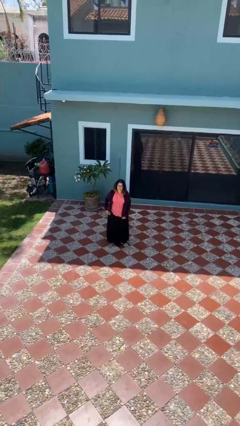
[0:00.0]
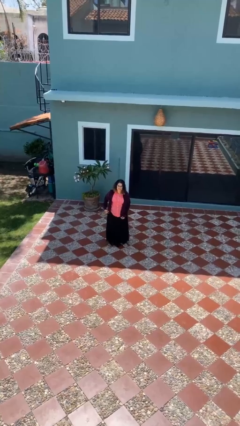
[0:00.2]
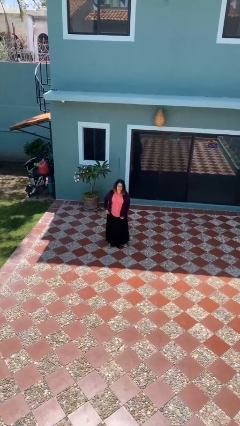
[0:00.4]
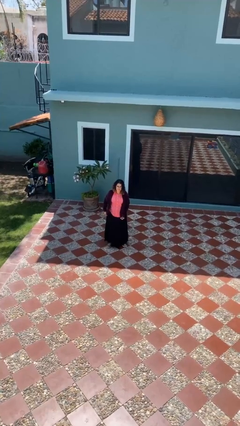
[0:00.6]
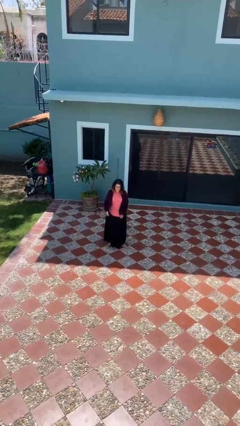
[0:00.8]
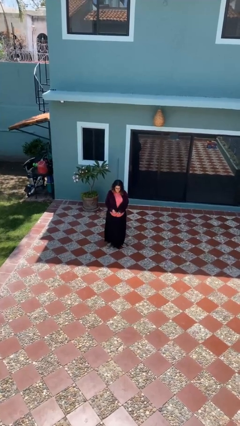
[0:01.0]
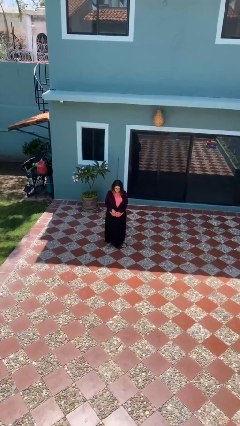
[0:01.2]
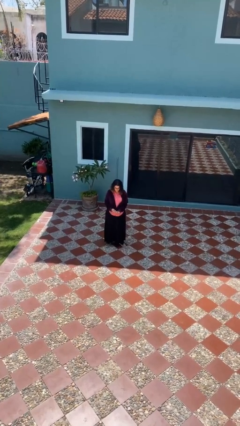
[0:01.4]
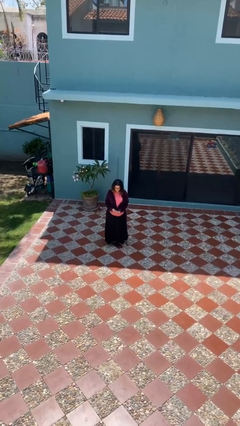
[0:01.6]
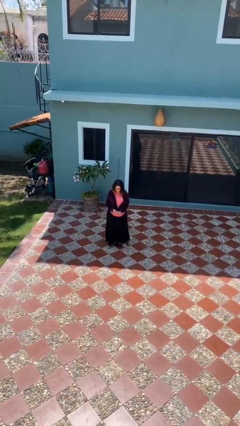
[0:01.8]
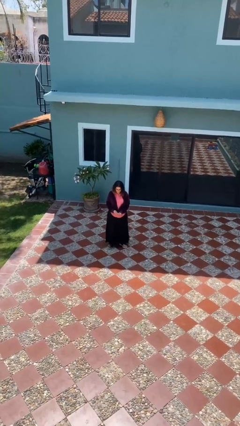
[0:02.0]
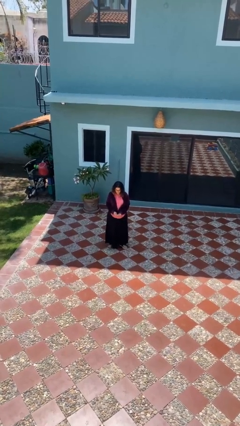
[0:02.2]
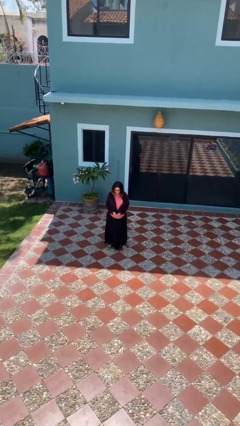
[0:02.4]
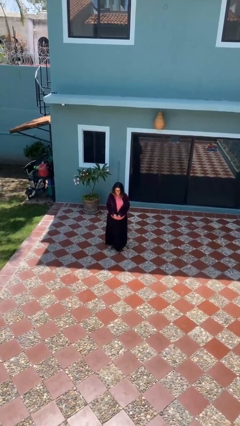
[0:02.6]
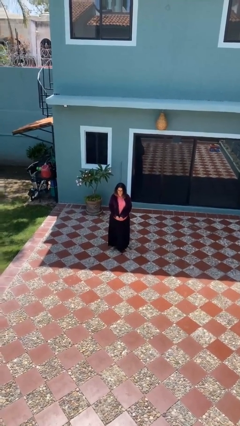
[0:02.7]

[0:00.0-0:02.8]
person zips up jacket

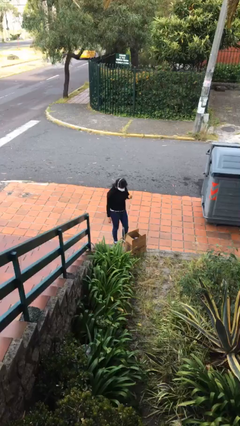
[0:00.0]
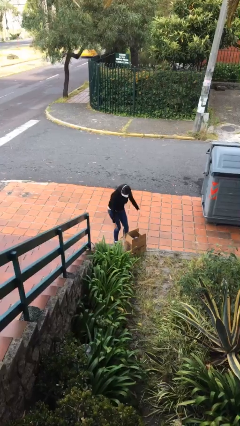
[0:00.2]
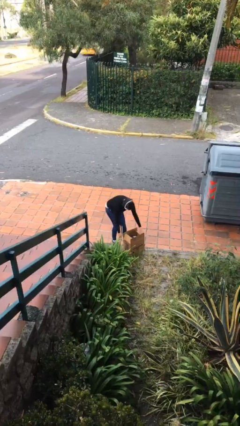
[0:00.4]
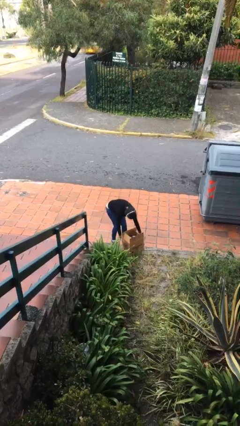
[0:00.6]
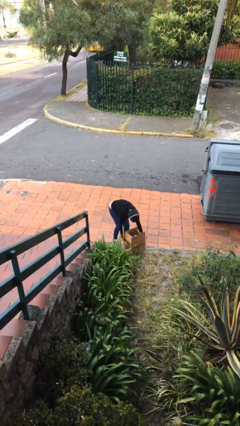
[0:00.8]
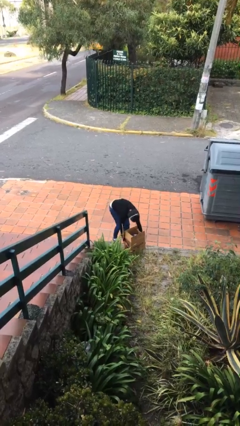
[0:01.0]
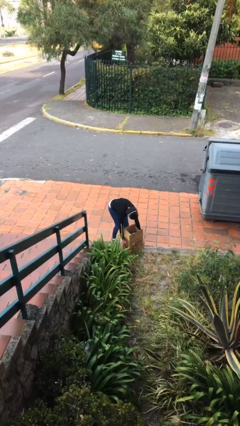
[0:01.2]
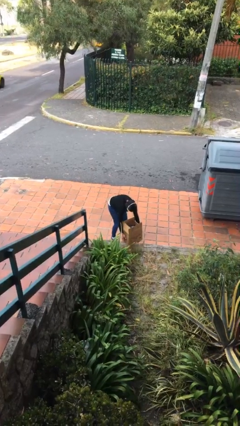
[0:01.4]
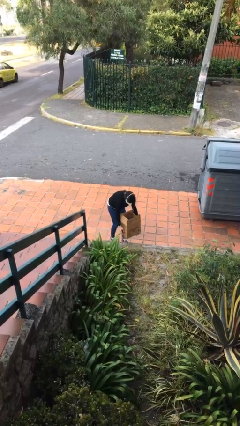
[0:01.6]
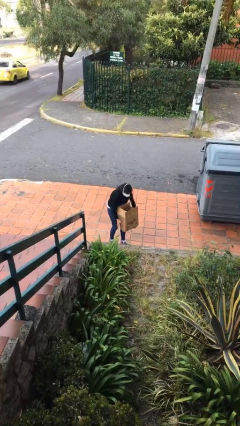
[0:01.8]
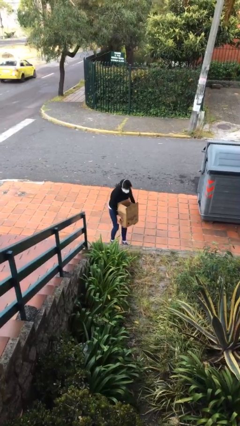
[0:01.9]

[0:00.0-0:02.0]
person picks up object from floor

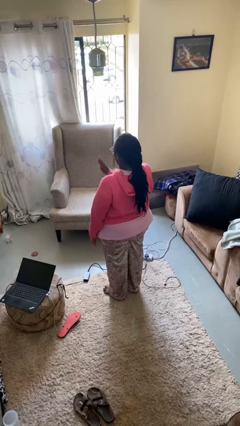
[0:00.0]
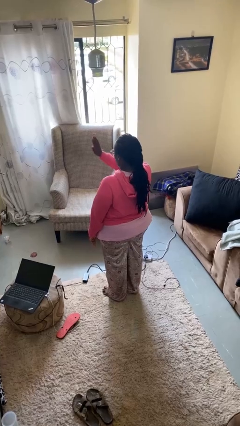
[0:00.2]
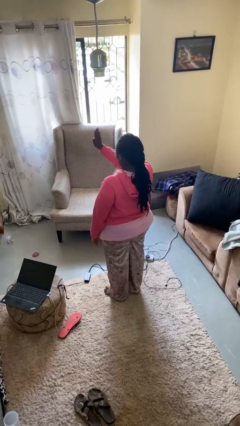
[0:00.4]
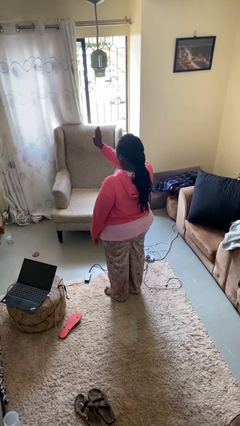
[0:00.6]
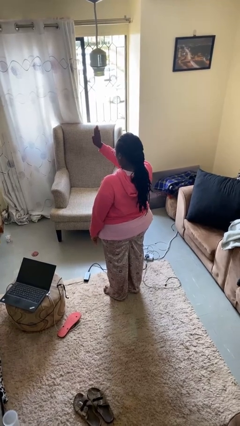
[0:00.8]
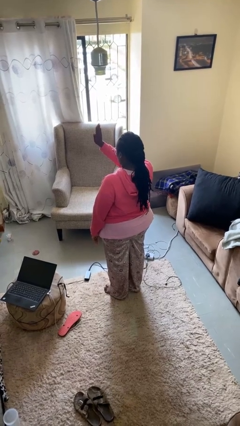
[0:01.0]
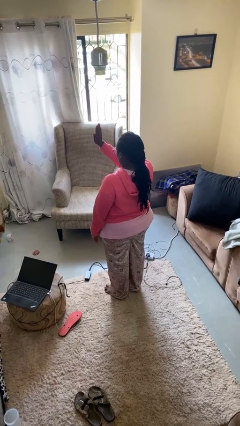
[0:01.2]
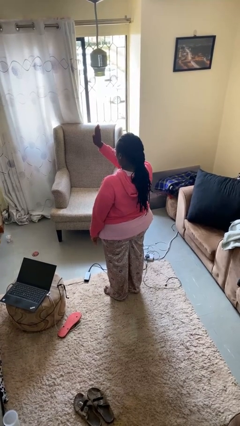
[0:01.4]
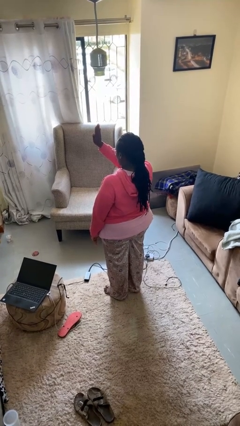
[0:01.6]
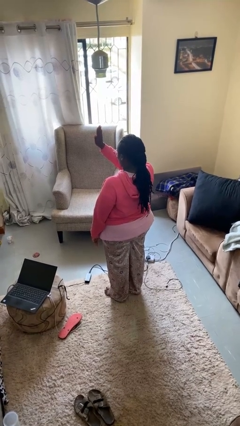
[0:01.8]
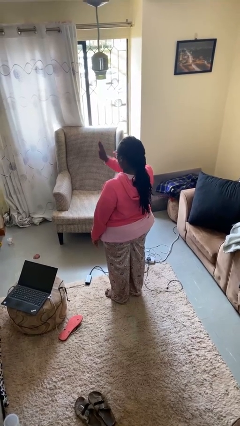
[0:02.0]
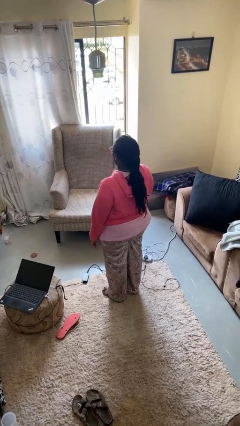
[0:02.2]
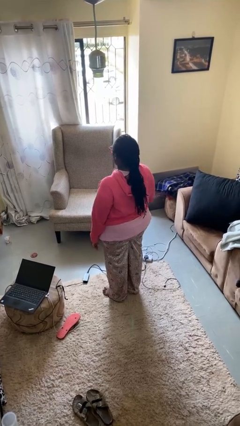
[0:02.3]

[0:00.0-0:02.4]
person gestures stop

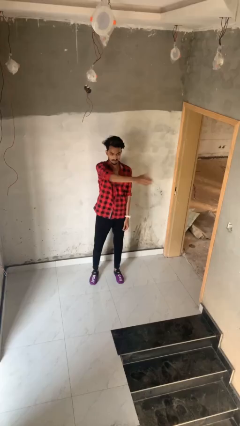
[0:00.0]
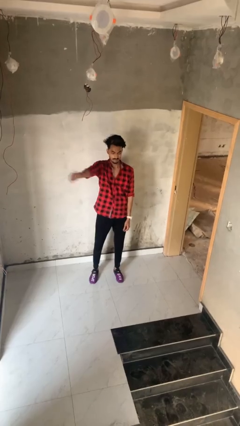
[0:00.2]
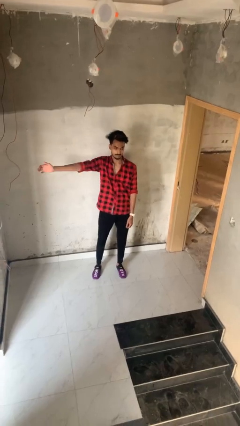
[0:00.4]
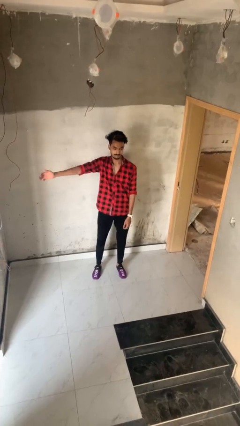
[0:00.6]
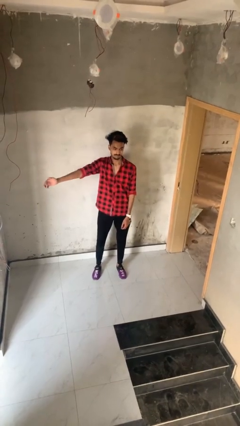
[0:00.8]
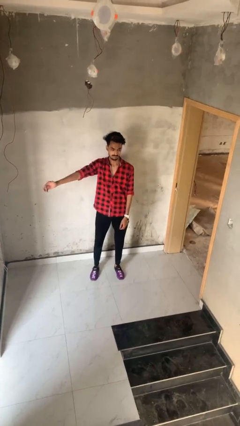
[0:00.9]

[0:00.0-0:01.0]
person gestures swipe right

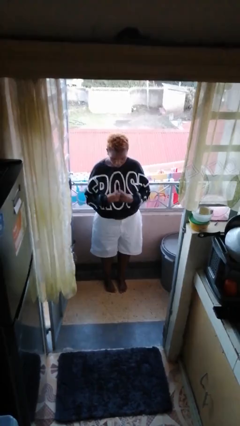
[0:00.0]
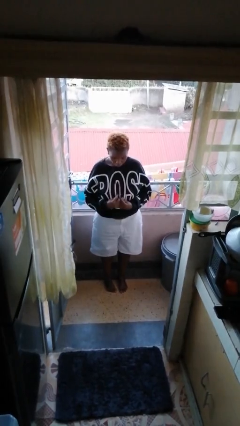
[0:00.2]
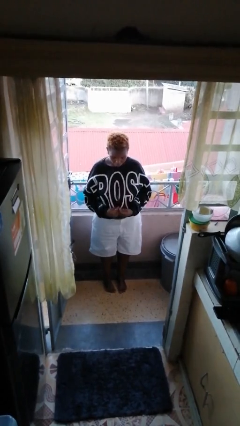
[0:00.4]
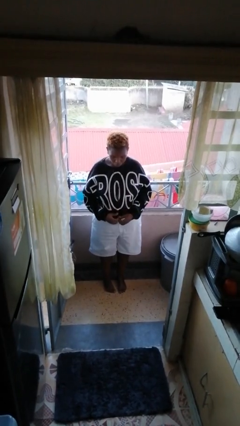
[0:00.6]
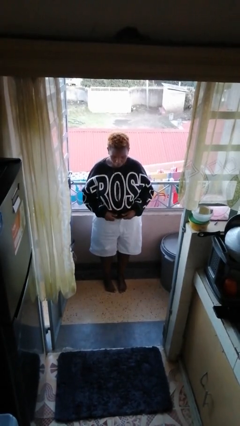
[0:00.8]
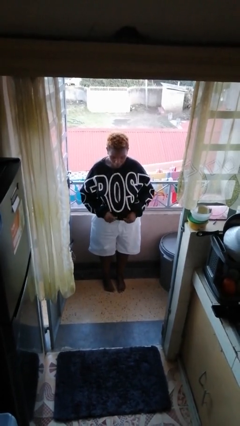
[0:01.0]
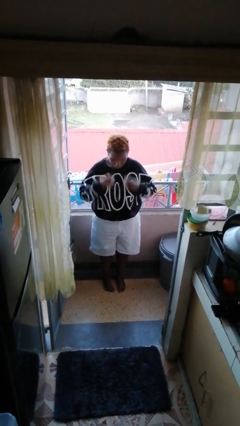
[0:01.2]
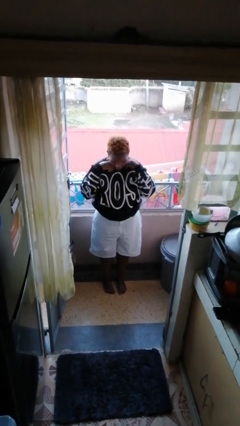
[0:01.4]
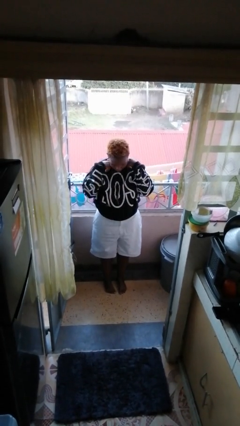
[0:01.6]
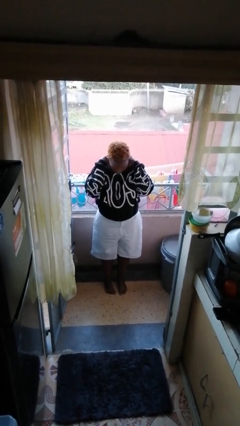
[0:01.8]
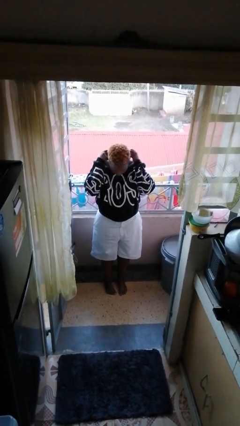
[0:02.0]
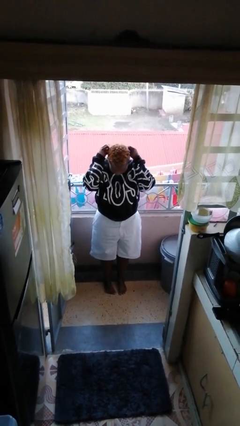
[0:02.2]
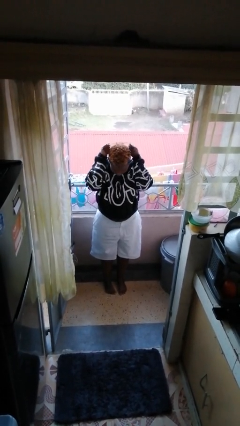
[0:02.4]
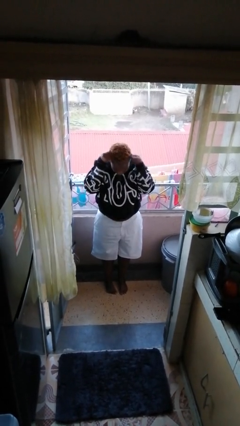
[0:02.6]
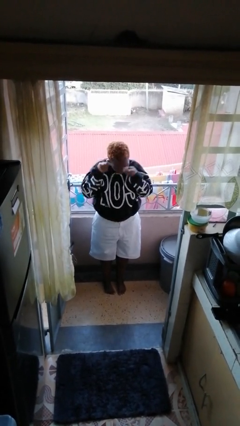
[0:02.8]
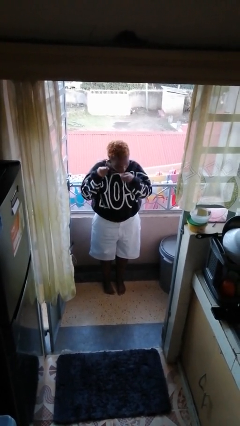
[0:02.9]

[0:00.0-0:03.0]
person takes off necklace

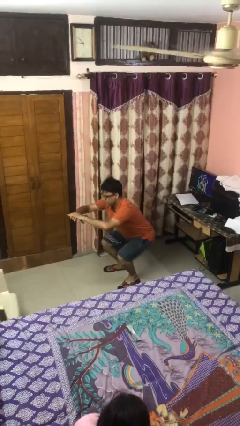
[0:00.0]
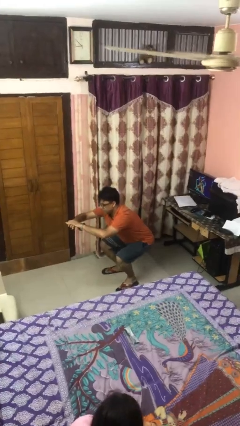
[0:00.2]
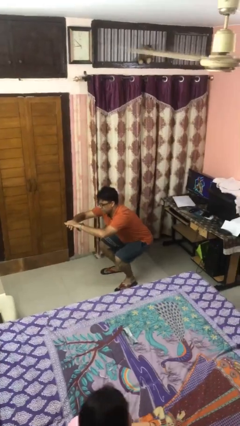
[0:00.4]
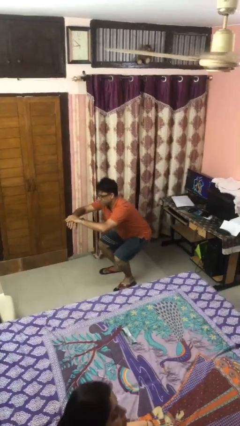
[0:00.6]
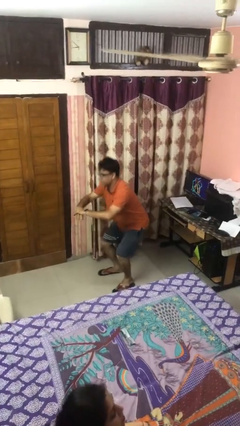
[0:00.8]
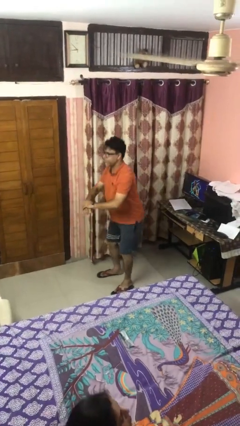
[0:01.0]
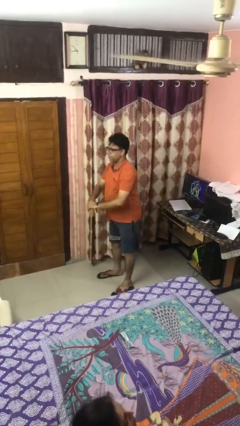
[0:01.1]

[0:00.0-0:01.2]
person stands up

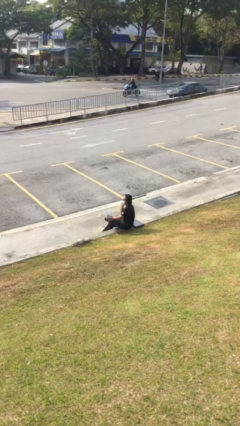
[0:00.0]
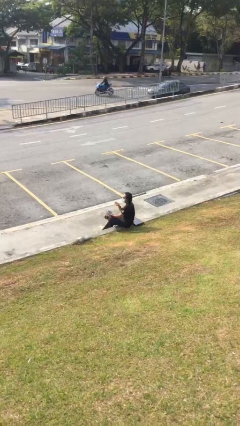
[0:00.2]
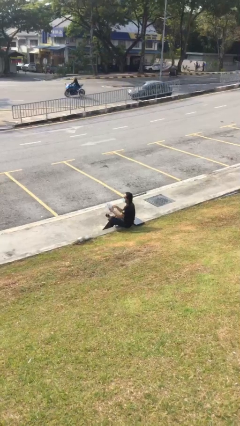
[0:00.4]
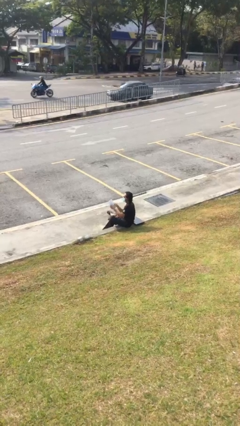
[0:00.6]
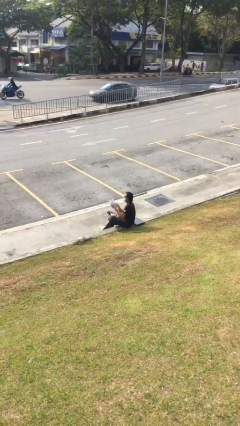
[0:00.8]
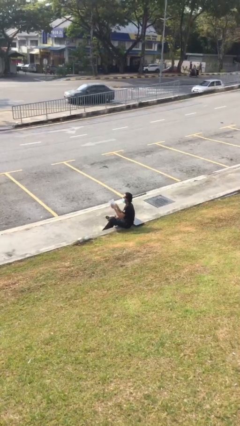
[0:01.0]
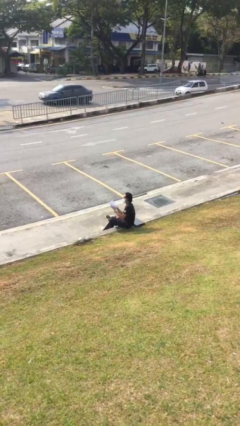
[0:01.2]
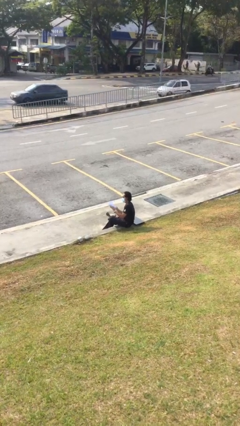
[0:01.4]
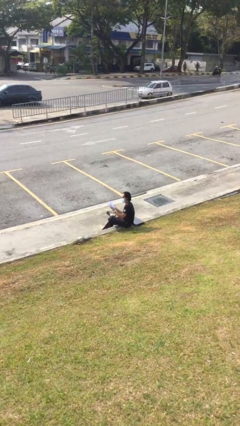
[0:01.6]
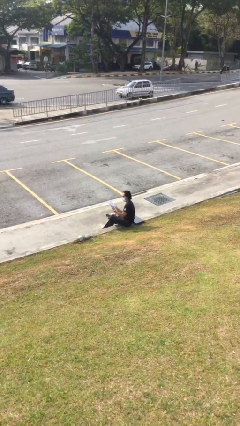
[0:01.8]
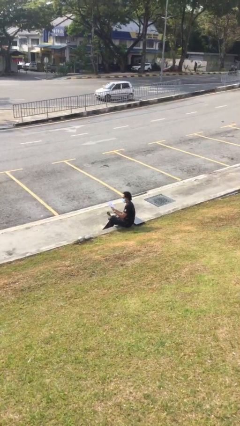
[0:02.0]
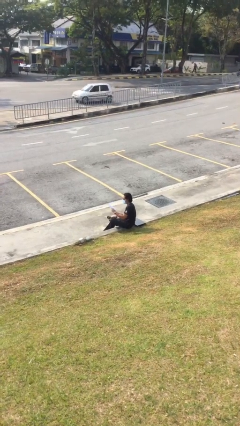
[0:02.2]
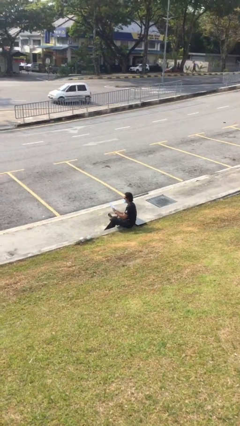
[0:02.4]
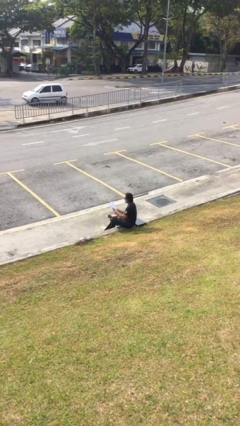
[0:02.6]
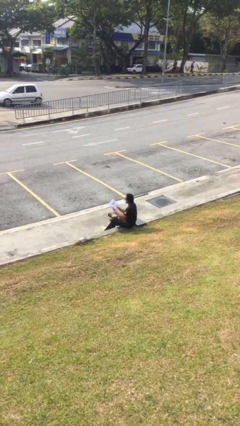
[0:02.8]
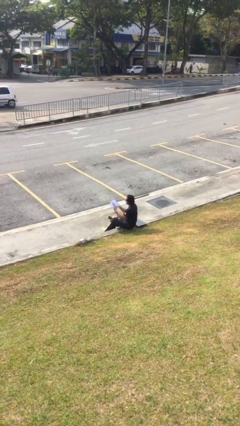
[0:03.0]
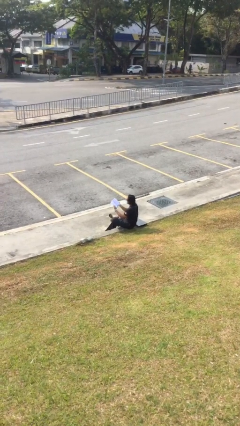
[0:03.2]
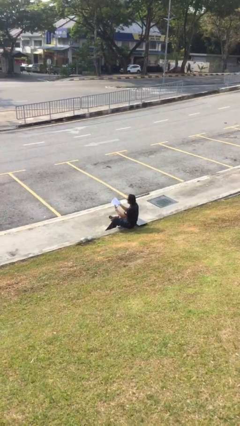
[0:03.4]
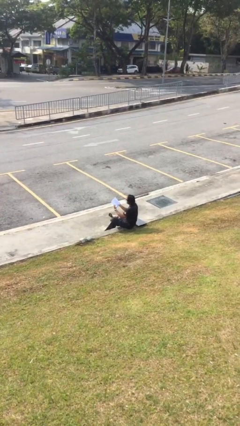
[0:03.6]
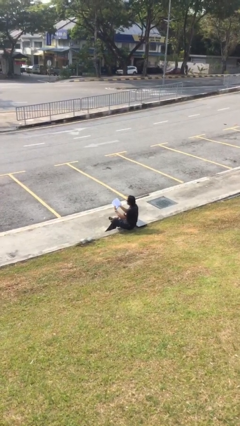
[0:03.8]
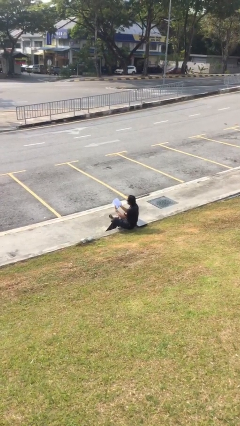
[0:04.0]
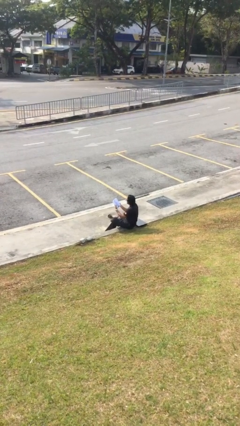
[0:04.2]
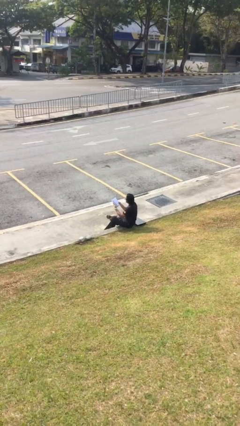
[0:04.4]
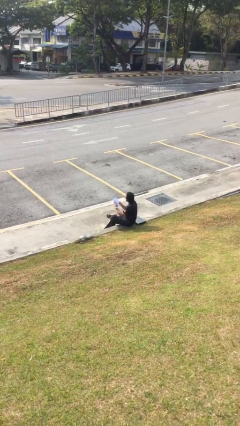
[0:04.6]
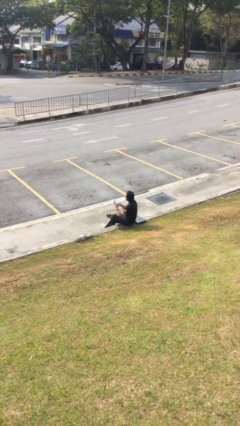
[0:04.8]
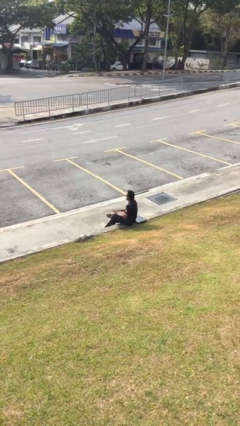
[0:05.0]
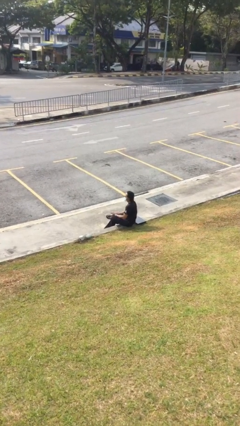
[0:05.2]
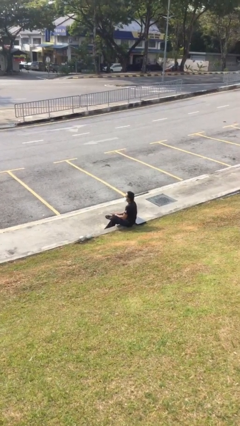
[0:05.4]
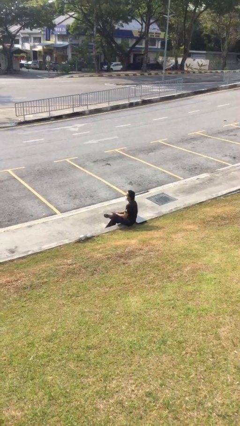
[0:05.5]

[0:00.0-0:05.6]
person reads document
